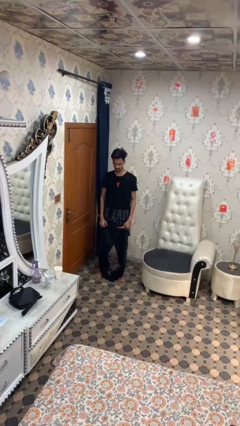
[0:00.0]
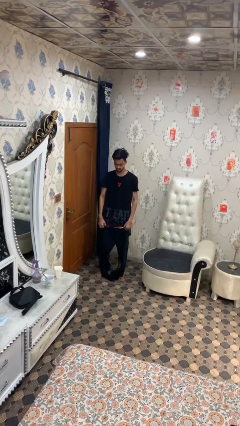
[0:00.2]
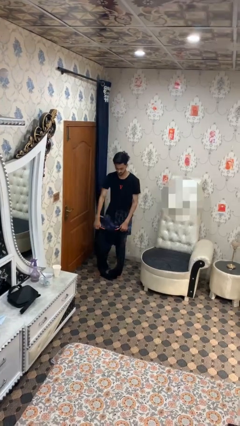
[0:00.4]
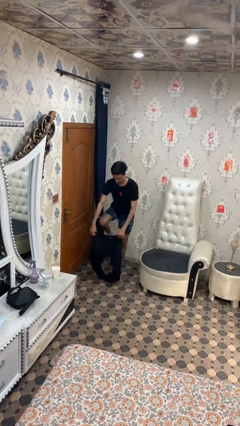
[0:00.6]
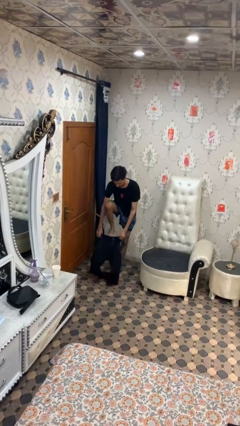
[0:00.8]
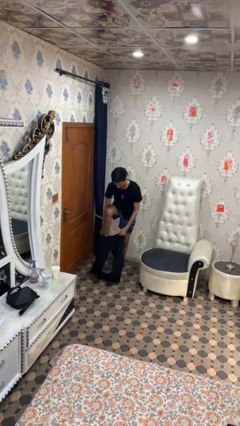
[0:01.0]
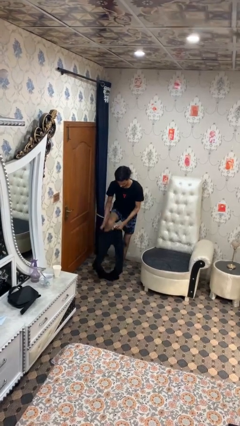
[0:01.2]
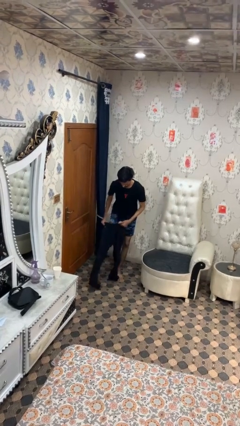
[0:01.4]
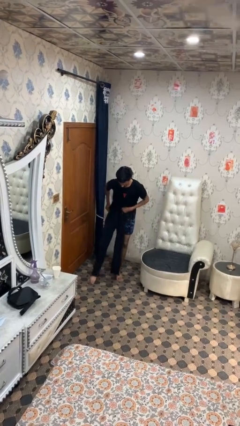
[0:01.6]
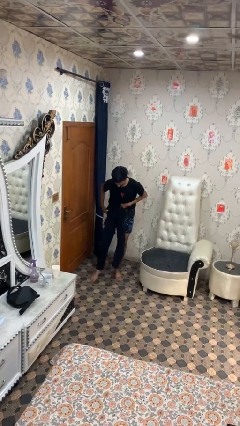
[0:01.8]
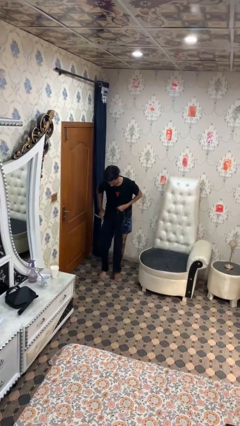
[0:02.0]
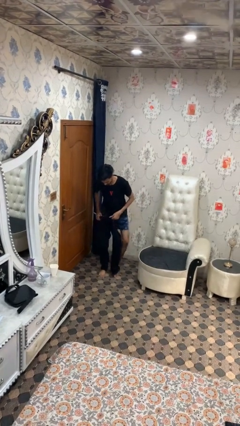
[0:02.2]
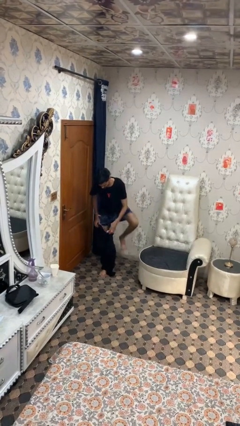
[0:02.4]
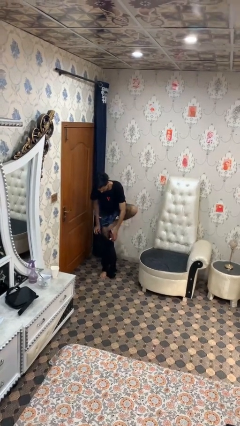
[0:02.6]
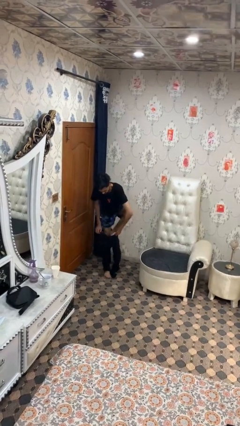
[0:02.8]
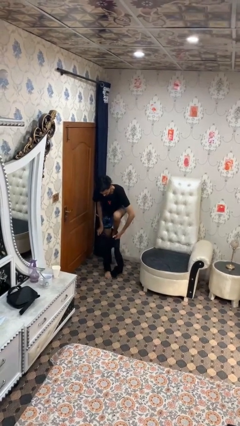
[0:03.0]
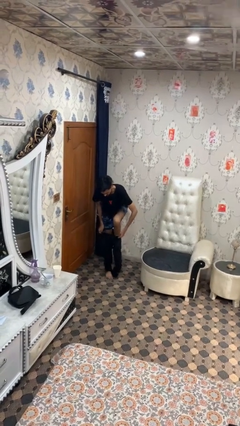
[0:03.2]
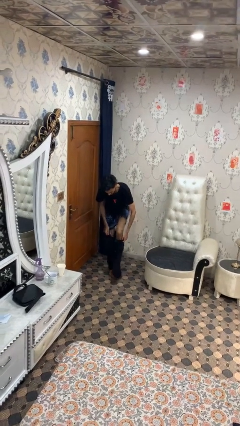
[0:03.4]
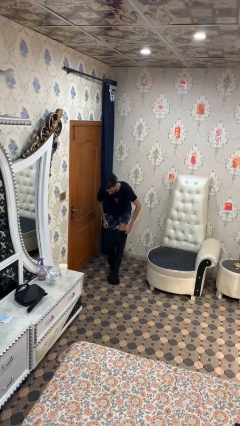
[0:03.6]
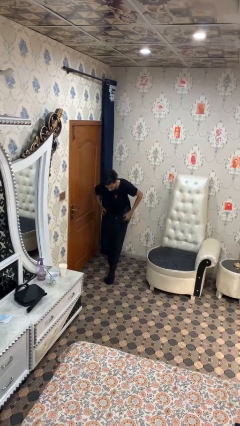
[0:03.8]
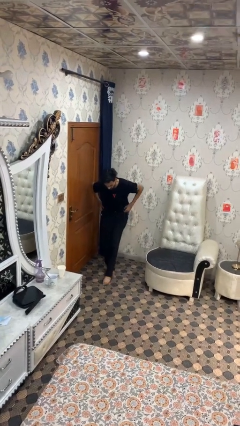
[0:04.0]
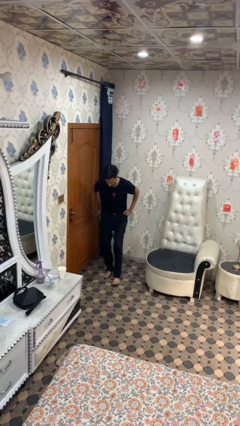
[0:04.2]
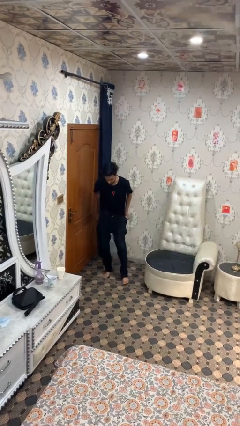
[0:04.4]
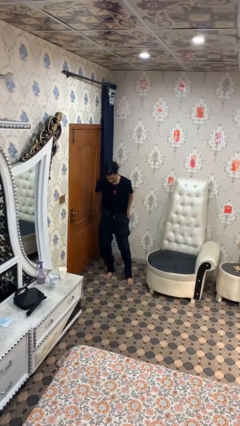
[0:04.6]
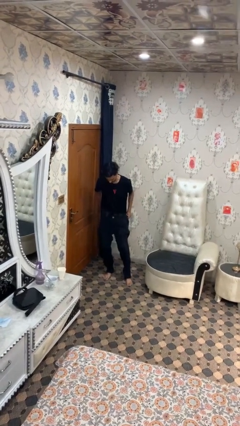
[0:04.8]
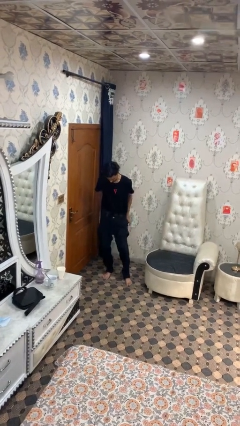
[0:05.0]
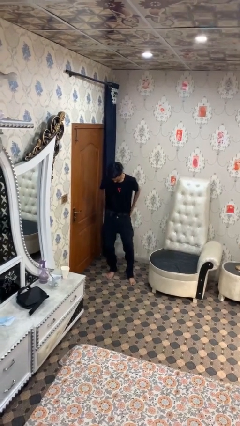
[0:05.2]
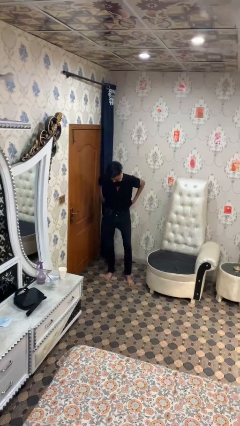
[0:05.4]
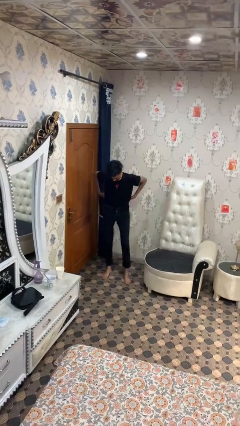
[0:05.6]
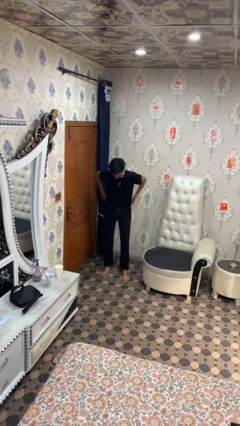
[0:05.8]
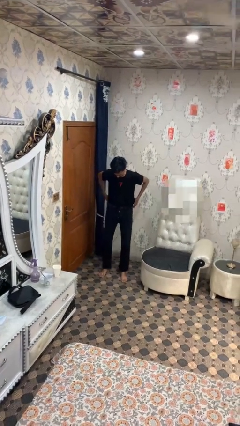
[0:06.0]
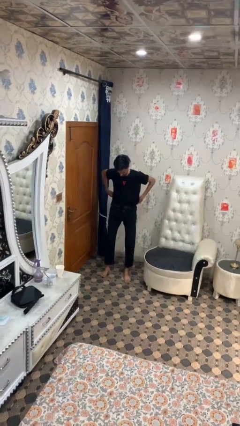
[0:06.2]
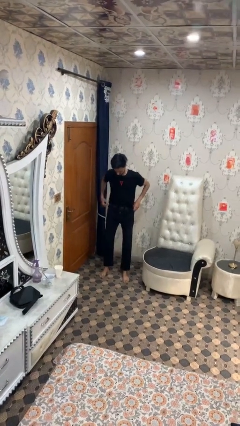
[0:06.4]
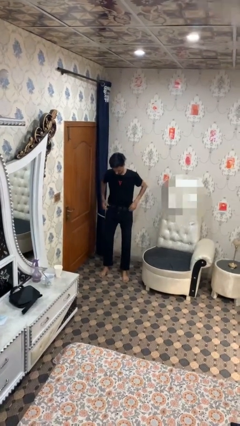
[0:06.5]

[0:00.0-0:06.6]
person puts on pants

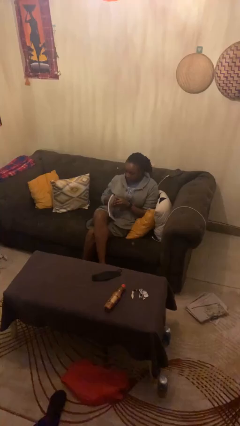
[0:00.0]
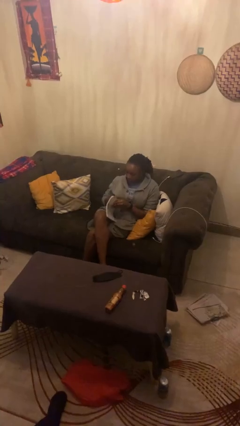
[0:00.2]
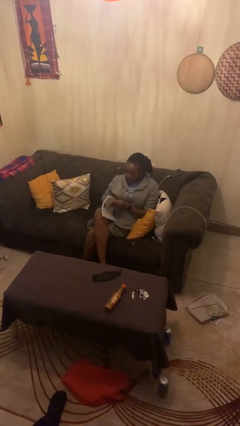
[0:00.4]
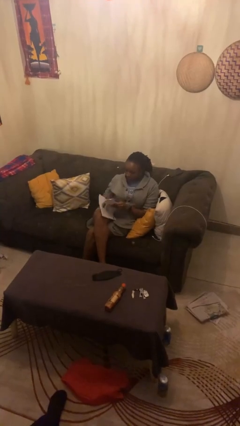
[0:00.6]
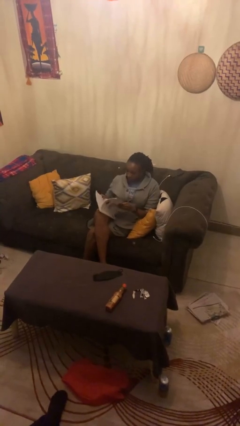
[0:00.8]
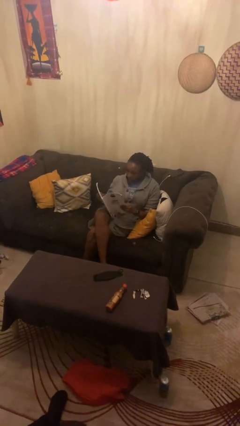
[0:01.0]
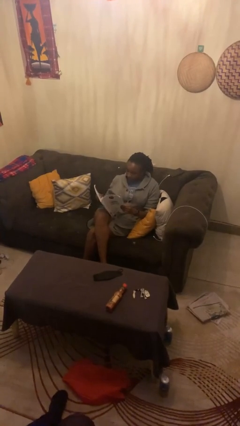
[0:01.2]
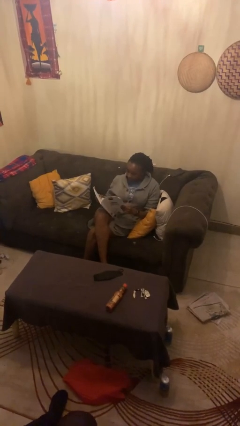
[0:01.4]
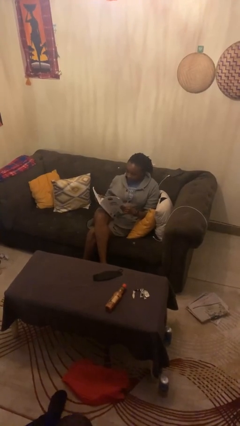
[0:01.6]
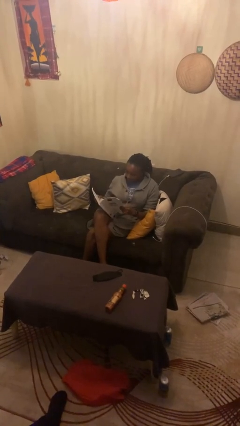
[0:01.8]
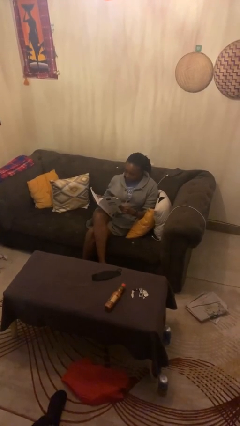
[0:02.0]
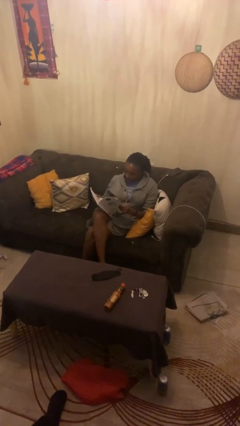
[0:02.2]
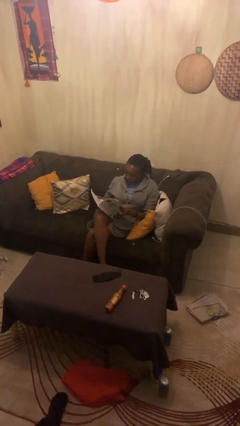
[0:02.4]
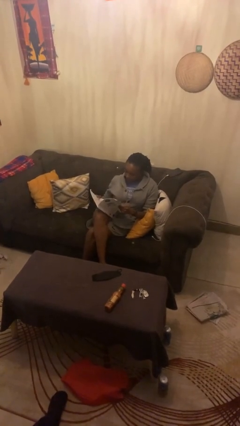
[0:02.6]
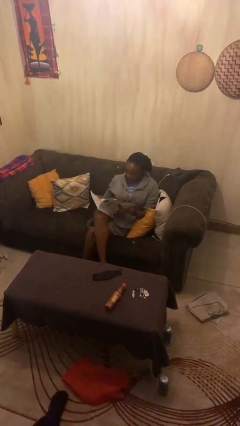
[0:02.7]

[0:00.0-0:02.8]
person reads magazine

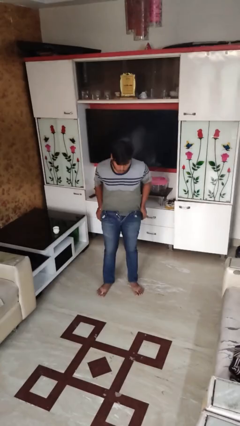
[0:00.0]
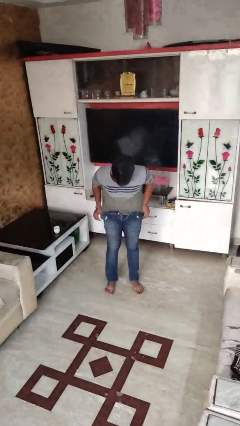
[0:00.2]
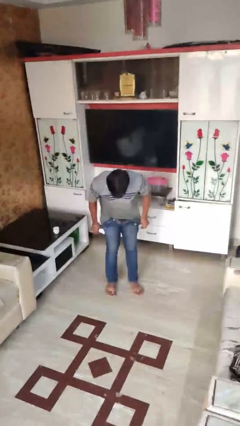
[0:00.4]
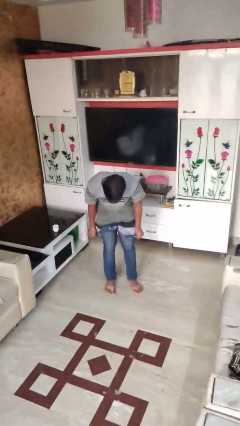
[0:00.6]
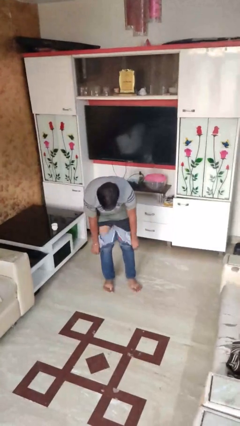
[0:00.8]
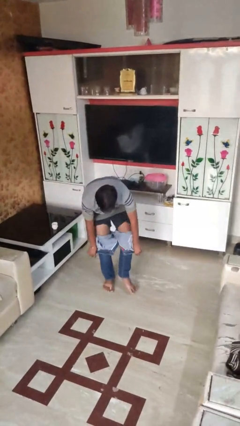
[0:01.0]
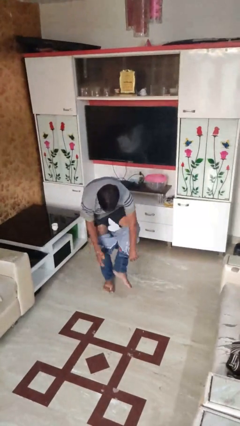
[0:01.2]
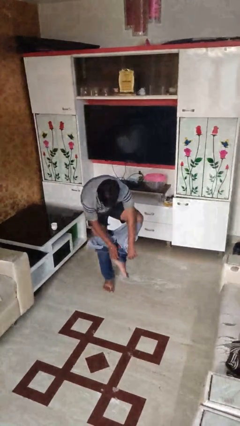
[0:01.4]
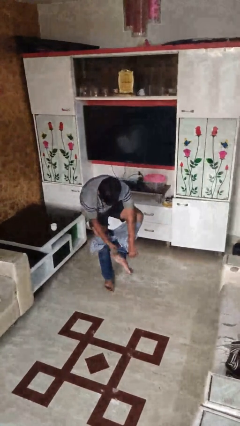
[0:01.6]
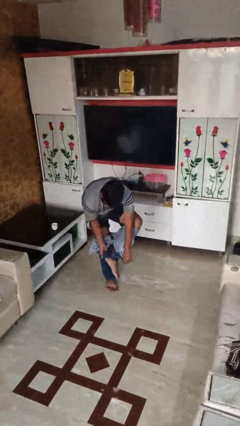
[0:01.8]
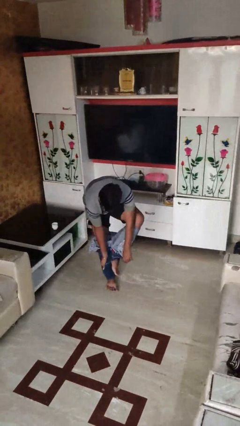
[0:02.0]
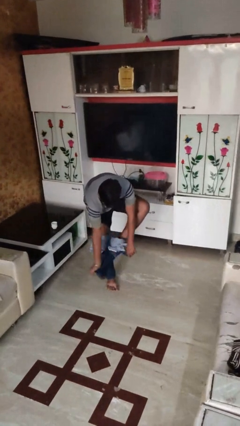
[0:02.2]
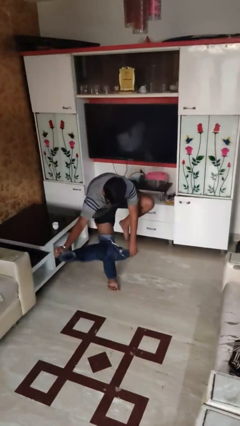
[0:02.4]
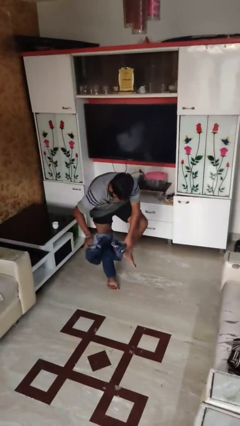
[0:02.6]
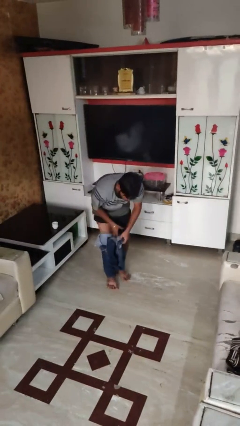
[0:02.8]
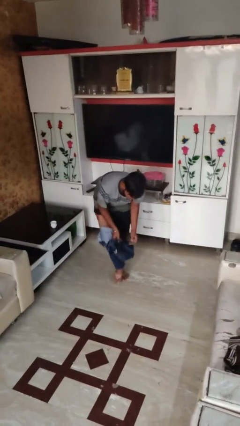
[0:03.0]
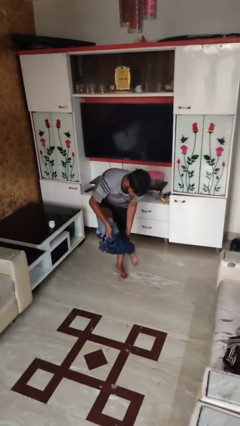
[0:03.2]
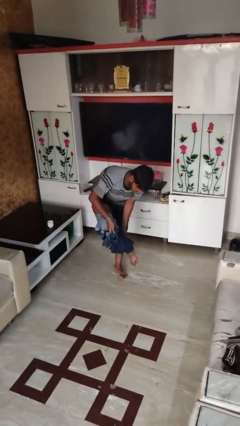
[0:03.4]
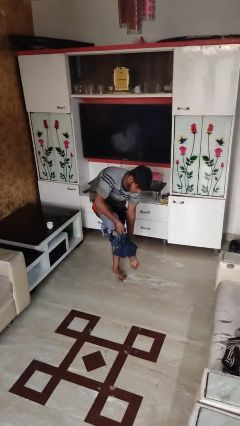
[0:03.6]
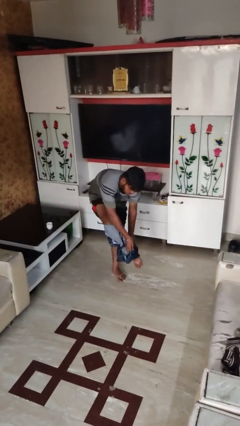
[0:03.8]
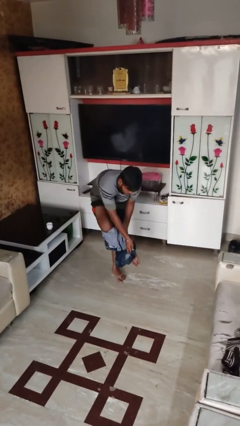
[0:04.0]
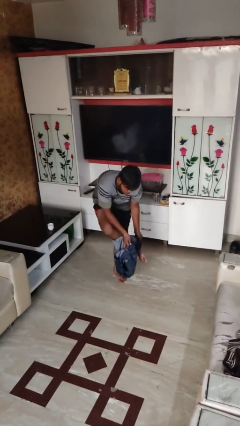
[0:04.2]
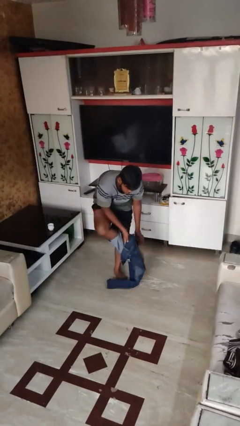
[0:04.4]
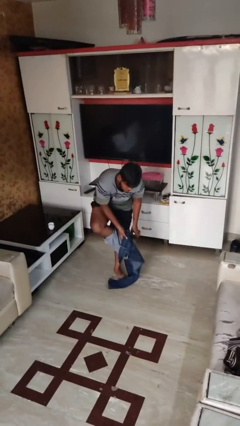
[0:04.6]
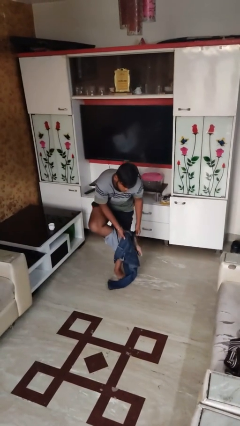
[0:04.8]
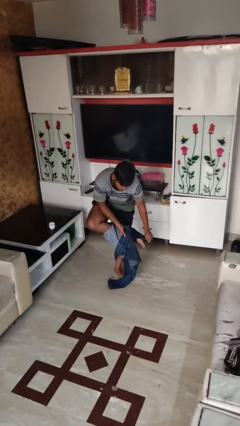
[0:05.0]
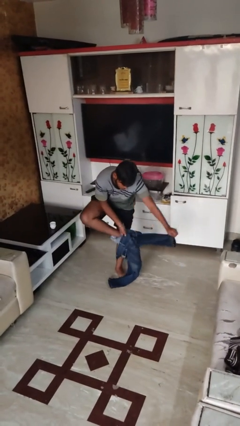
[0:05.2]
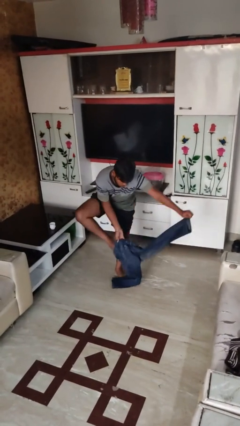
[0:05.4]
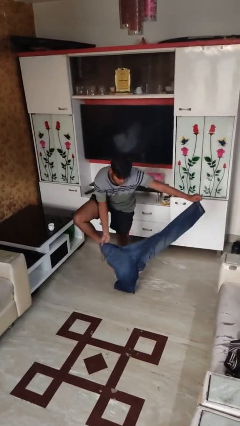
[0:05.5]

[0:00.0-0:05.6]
person takes off pants

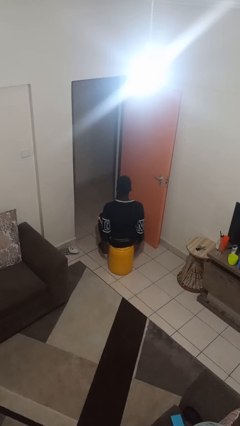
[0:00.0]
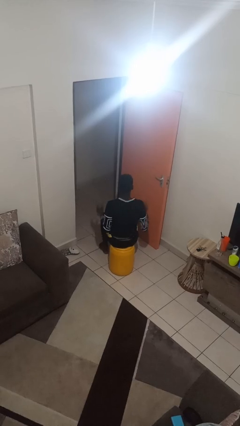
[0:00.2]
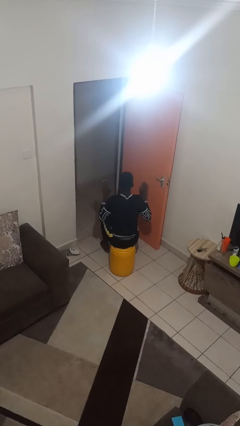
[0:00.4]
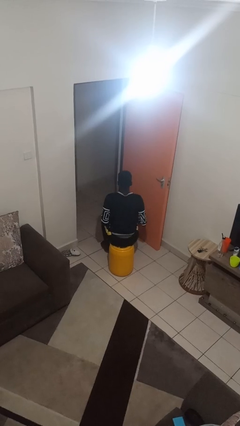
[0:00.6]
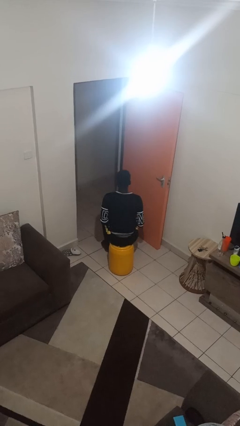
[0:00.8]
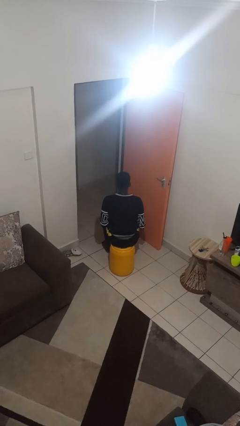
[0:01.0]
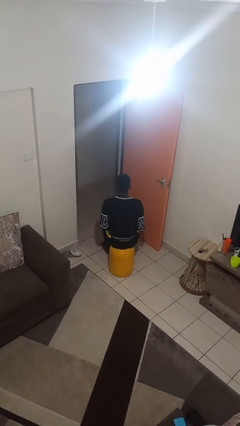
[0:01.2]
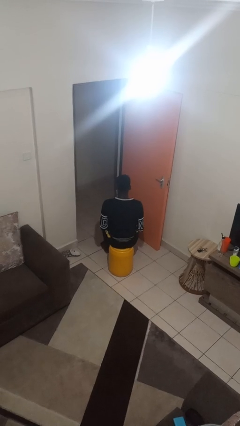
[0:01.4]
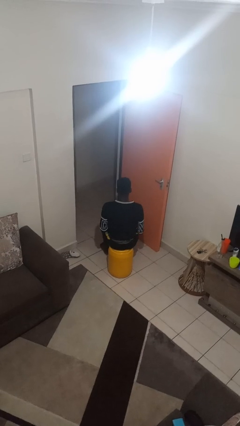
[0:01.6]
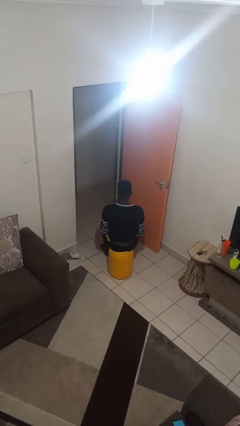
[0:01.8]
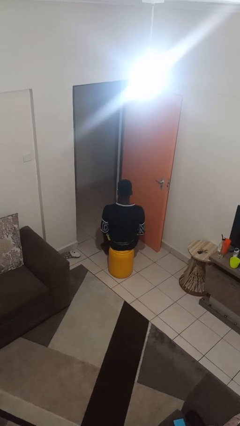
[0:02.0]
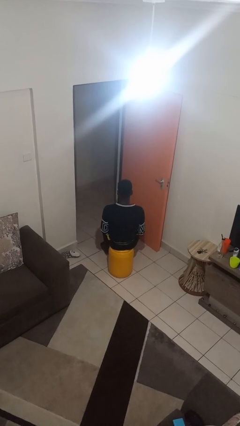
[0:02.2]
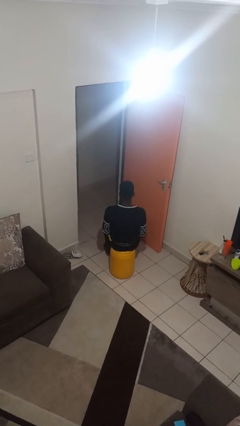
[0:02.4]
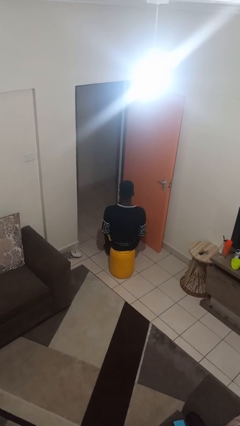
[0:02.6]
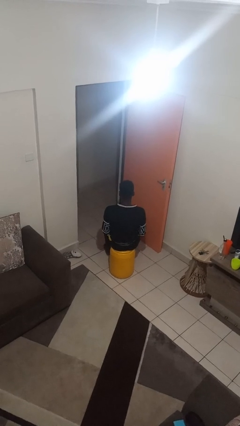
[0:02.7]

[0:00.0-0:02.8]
person slaps hands on thighs

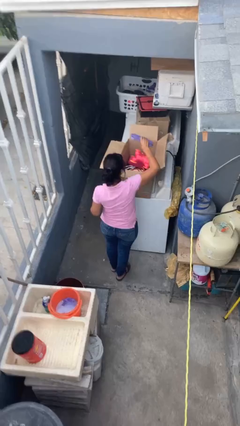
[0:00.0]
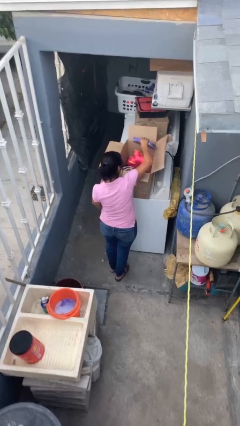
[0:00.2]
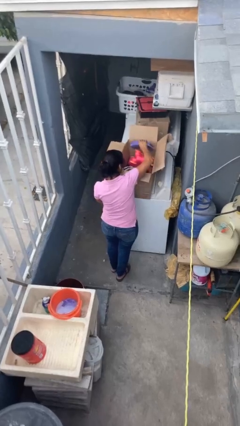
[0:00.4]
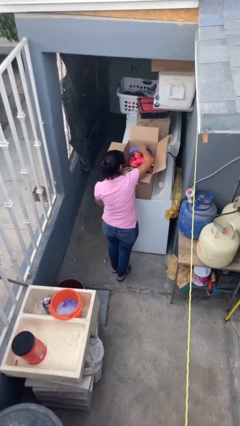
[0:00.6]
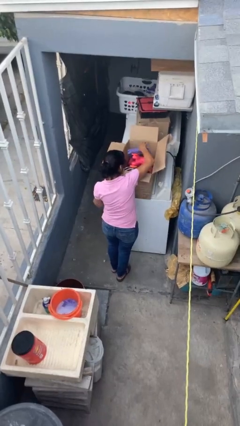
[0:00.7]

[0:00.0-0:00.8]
person puts object into box
